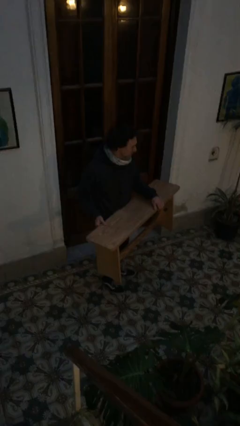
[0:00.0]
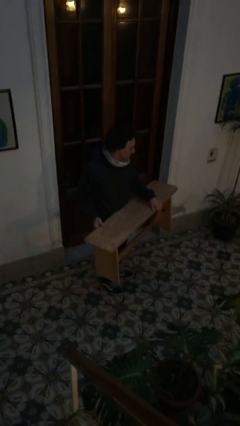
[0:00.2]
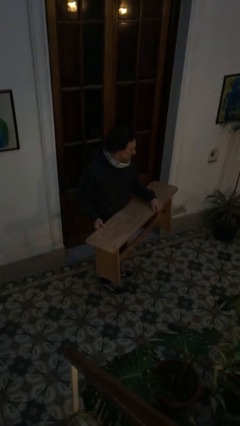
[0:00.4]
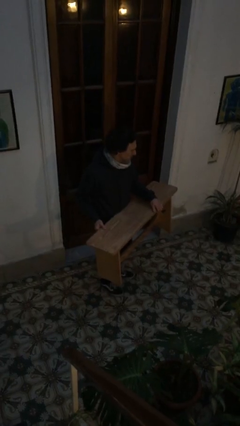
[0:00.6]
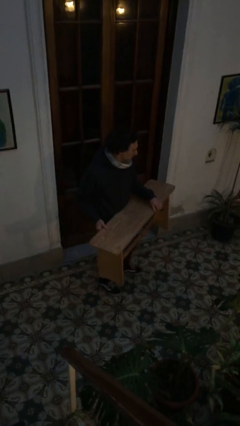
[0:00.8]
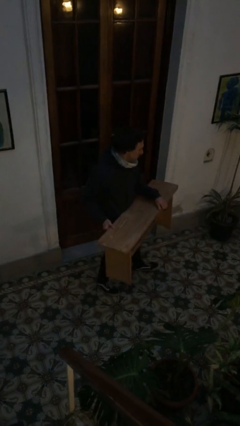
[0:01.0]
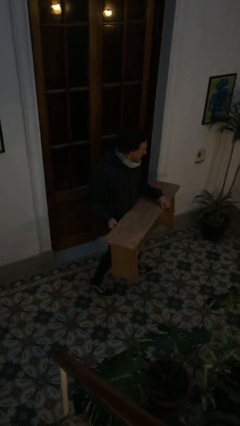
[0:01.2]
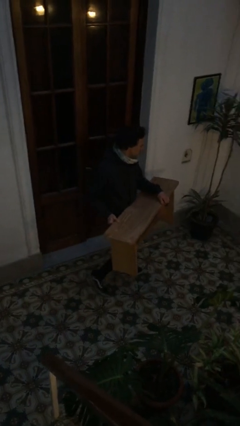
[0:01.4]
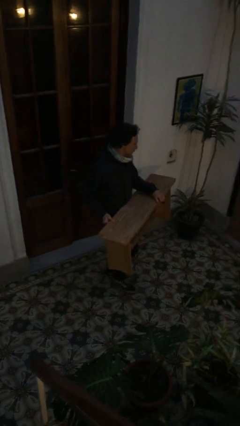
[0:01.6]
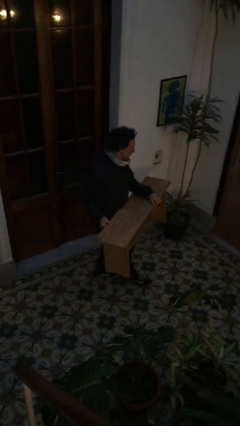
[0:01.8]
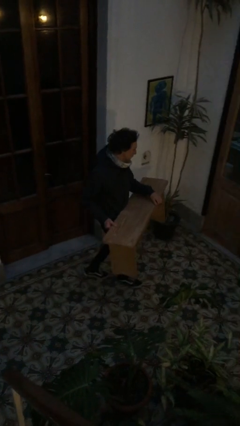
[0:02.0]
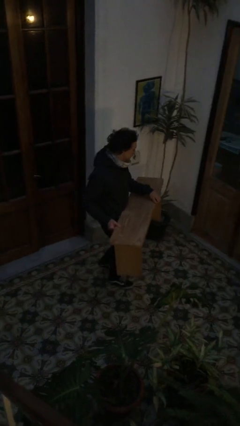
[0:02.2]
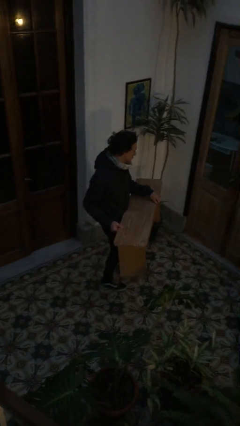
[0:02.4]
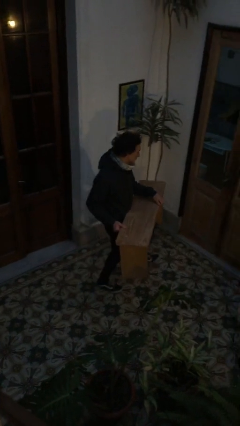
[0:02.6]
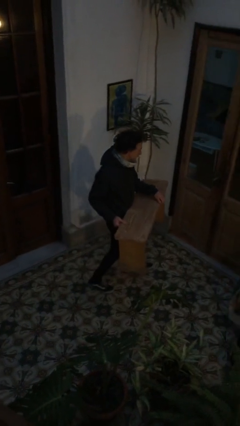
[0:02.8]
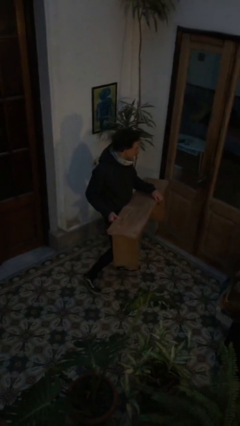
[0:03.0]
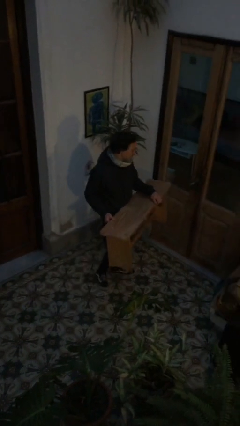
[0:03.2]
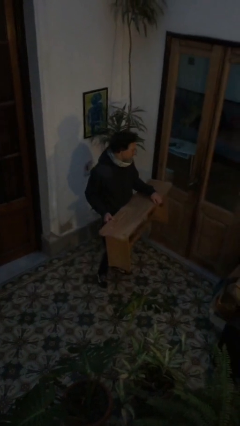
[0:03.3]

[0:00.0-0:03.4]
person carries furniture

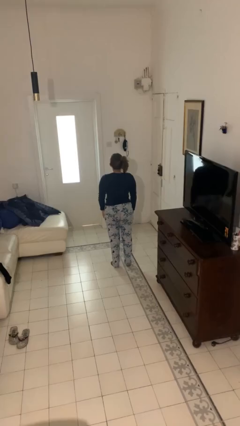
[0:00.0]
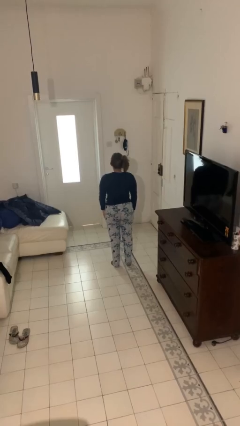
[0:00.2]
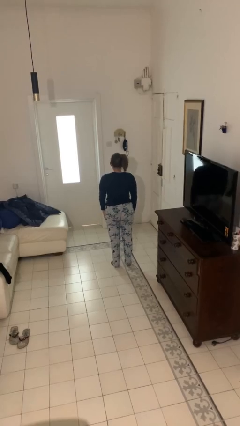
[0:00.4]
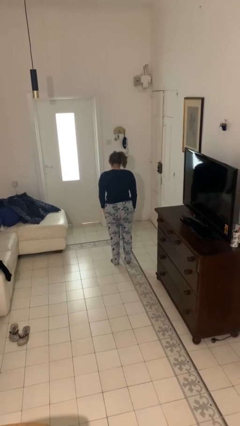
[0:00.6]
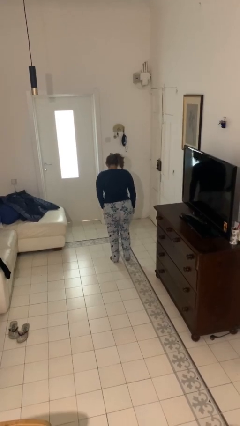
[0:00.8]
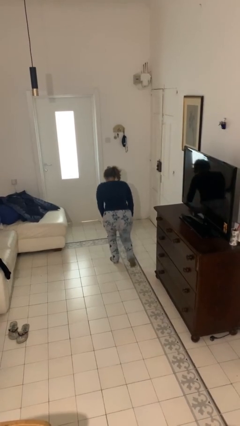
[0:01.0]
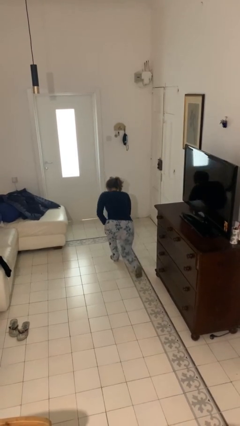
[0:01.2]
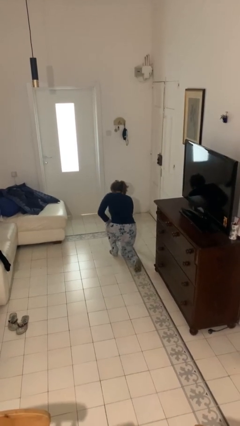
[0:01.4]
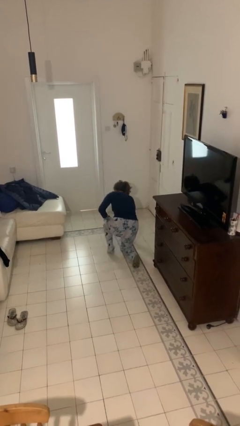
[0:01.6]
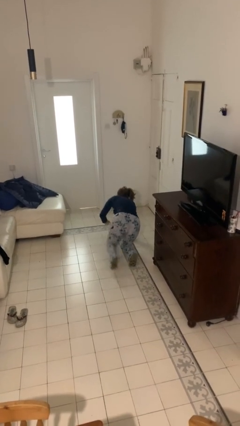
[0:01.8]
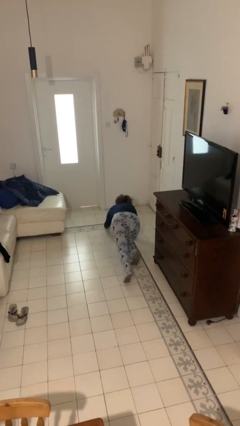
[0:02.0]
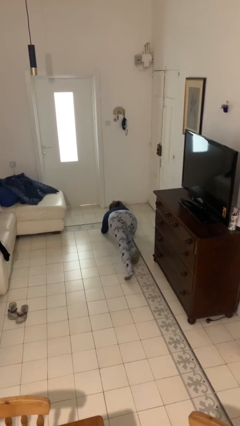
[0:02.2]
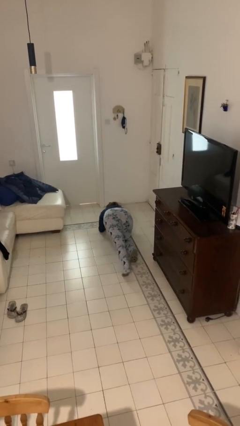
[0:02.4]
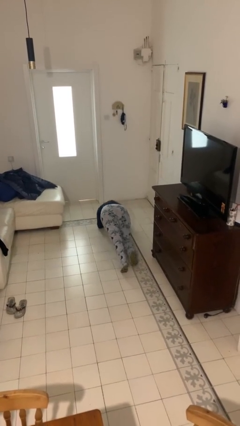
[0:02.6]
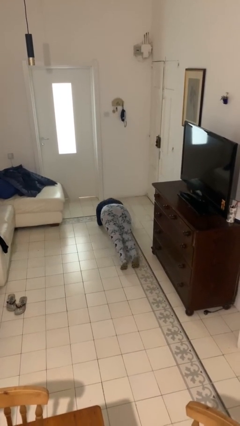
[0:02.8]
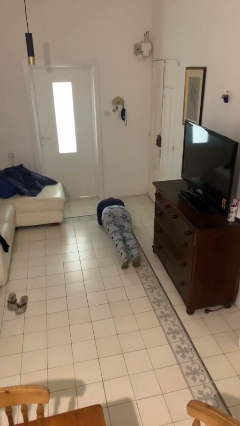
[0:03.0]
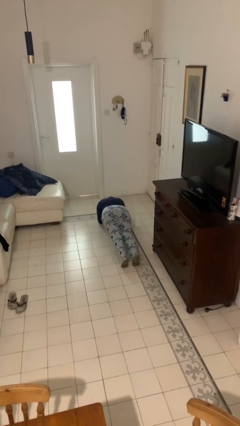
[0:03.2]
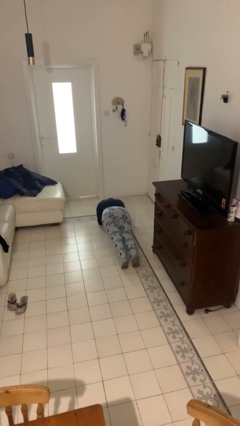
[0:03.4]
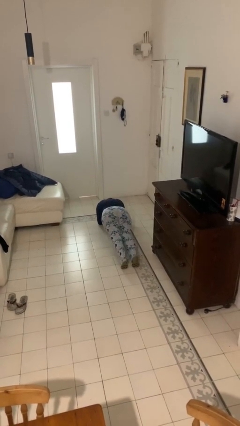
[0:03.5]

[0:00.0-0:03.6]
person exercises with plank

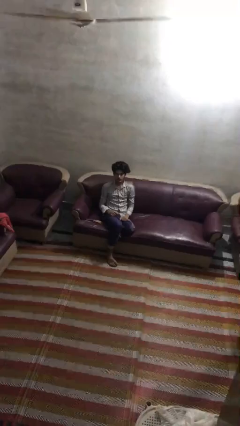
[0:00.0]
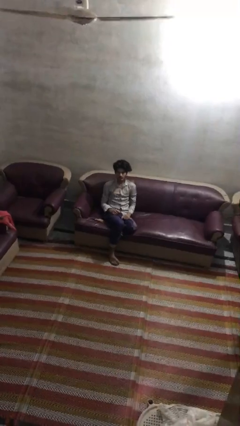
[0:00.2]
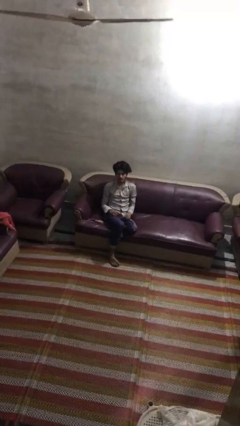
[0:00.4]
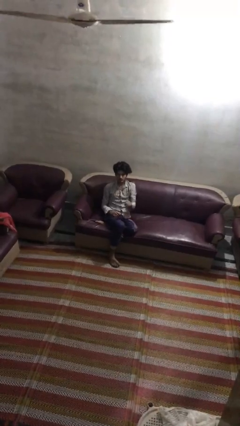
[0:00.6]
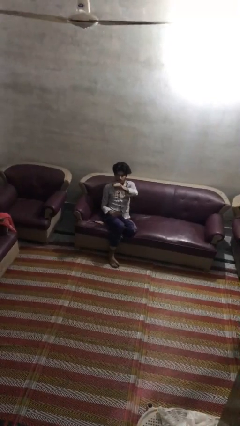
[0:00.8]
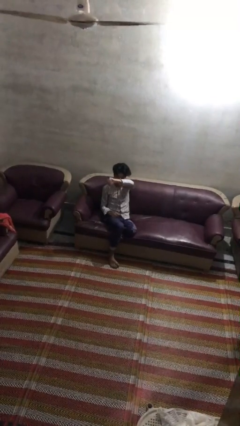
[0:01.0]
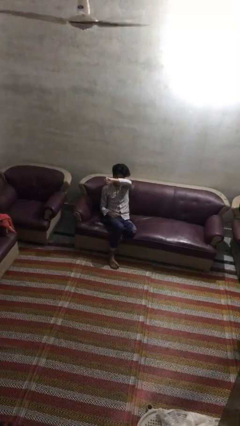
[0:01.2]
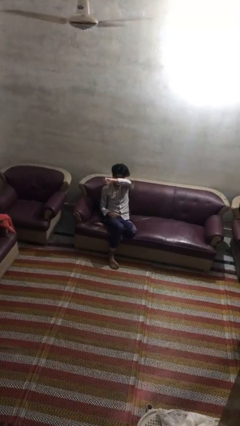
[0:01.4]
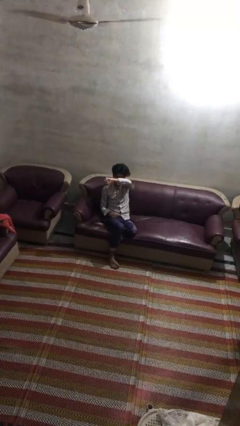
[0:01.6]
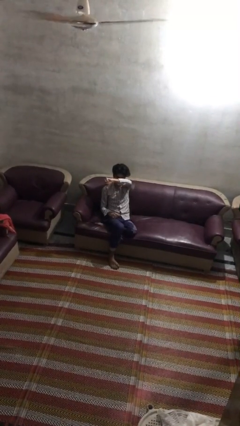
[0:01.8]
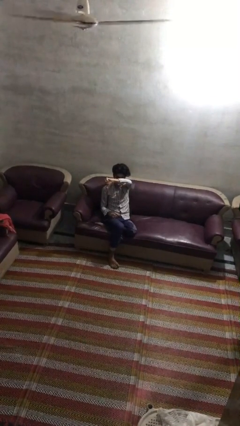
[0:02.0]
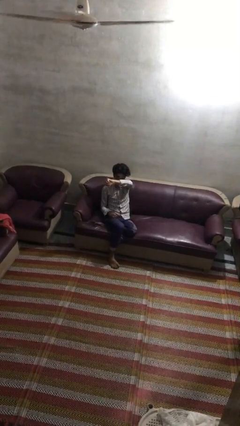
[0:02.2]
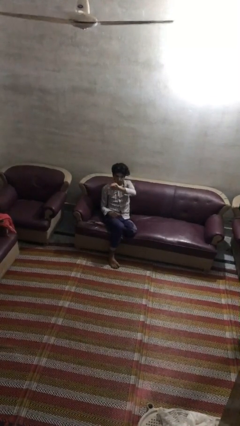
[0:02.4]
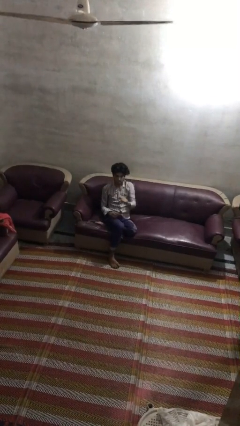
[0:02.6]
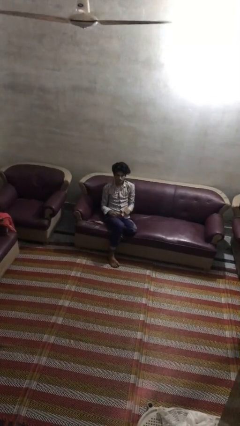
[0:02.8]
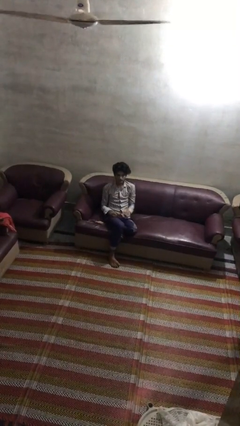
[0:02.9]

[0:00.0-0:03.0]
person gestures thumbs down

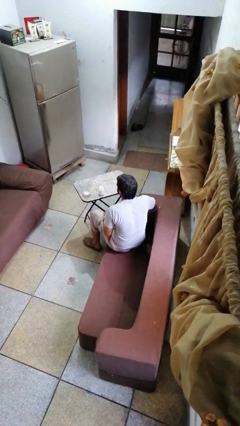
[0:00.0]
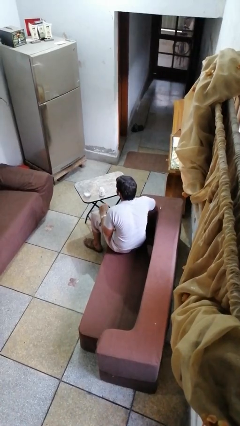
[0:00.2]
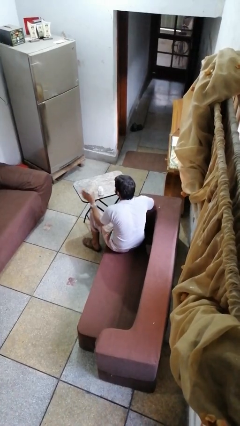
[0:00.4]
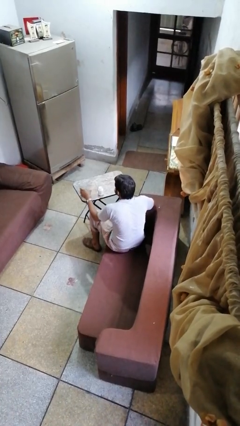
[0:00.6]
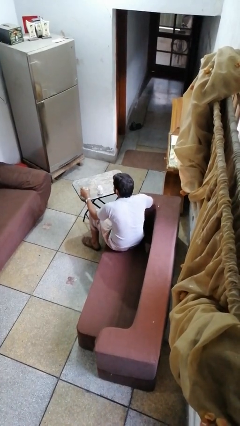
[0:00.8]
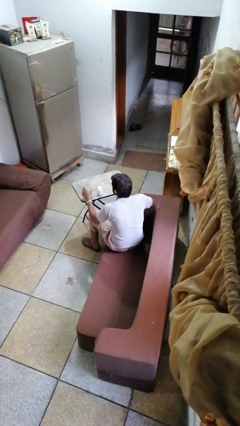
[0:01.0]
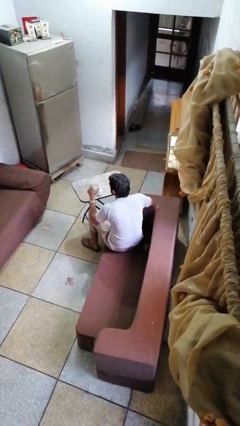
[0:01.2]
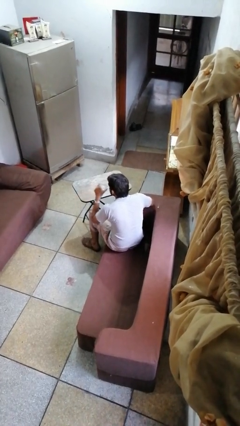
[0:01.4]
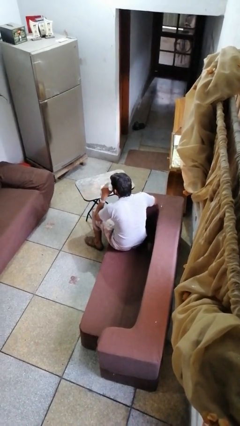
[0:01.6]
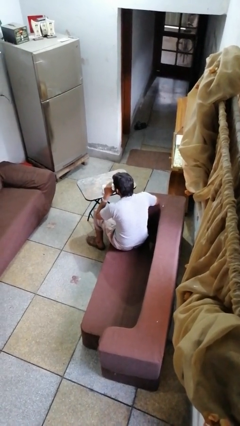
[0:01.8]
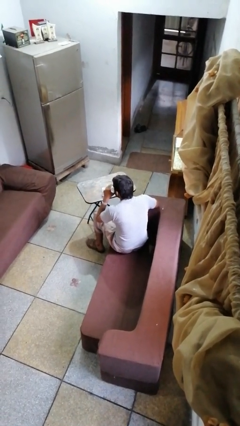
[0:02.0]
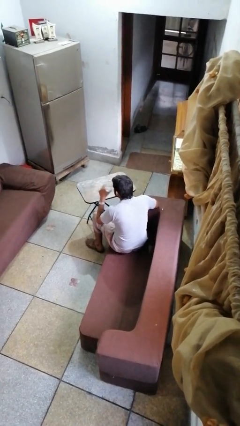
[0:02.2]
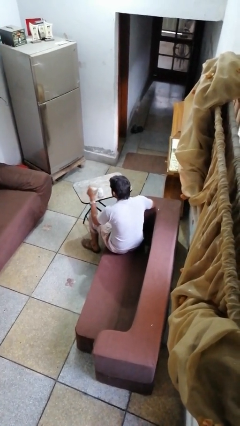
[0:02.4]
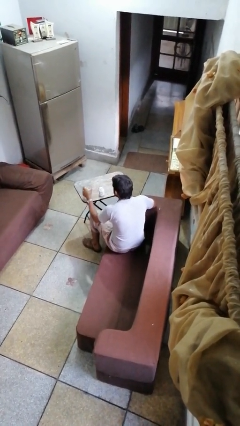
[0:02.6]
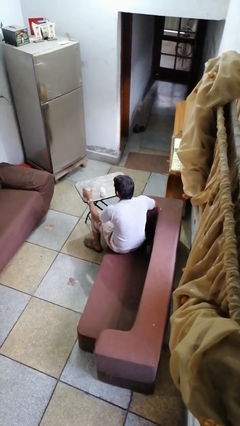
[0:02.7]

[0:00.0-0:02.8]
person drinks from cup

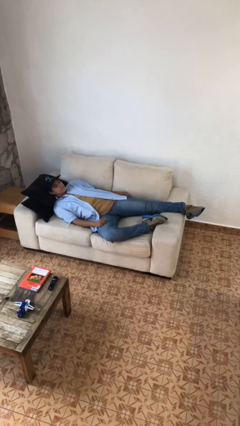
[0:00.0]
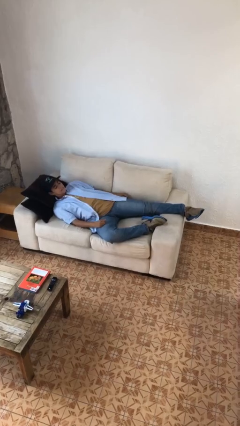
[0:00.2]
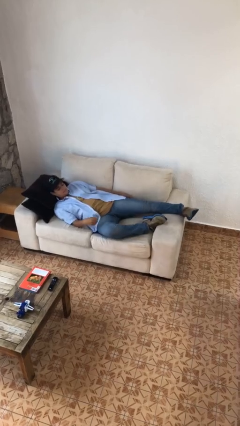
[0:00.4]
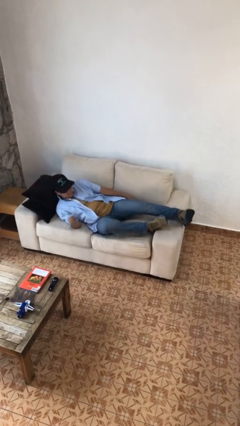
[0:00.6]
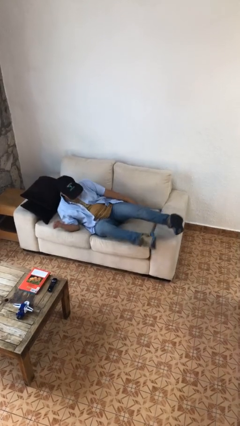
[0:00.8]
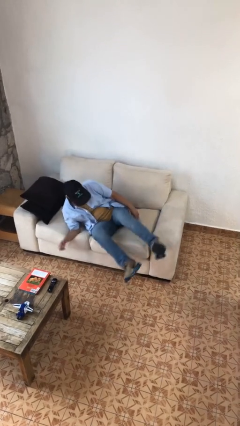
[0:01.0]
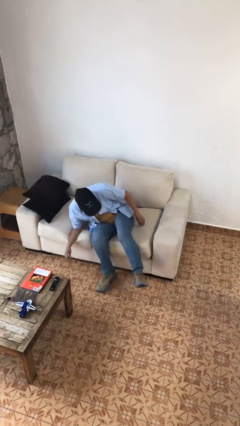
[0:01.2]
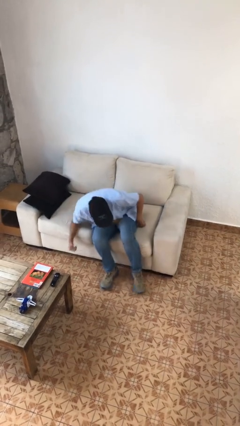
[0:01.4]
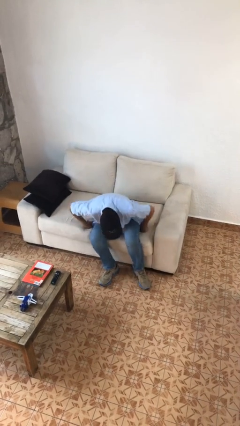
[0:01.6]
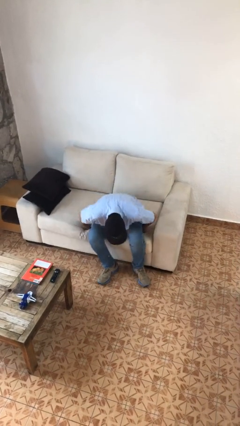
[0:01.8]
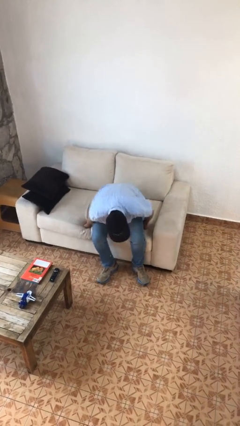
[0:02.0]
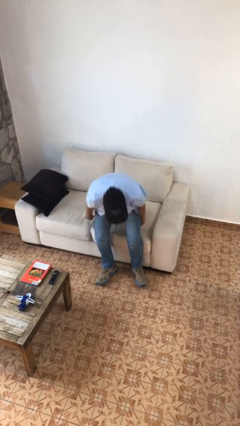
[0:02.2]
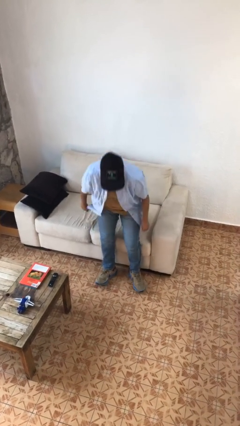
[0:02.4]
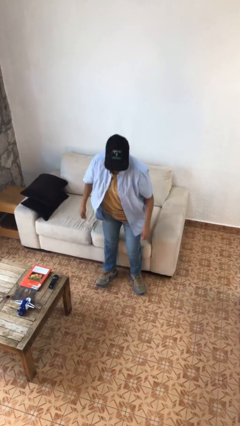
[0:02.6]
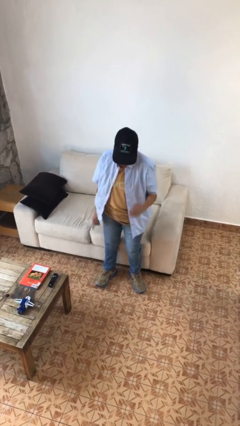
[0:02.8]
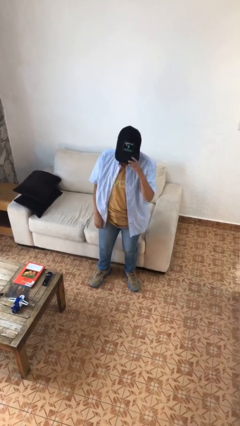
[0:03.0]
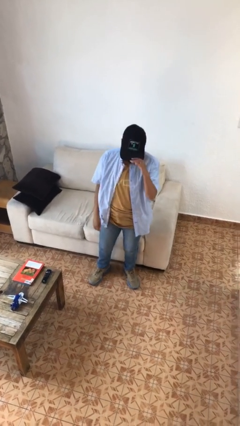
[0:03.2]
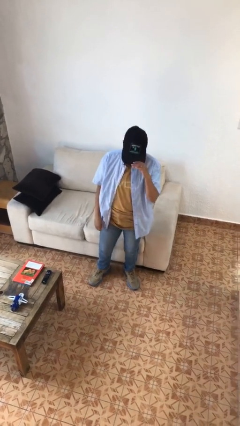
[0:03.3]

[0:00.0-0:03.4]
person stands up

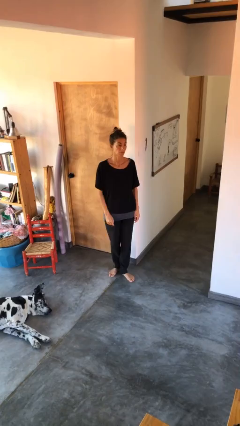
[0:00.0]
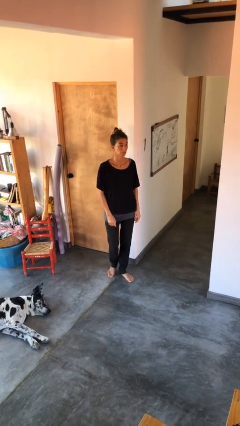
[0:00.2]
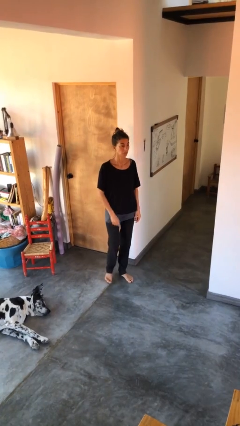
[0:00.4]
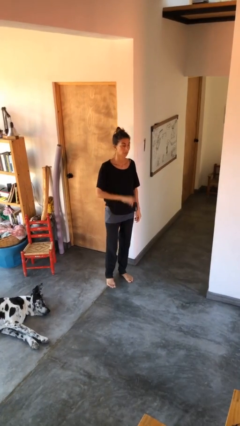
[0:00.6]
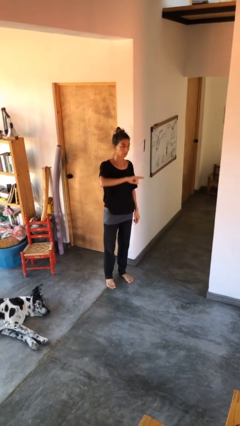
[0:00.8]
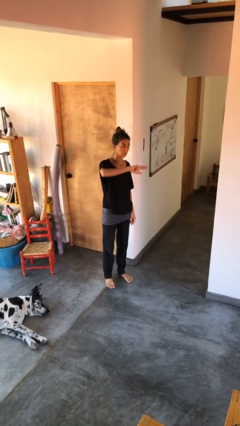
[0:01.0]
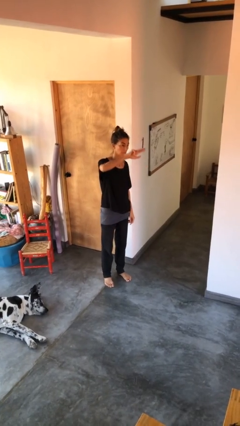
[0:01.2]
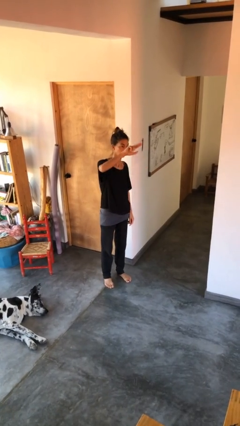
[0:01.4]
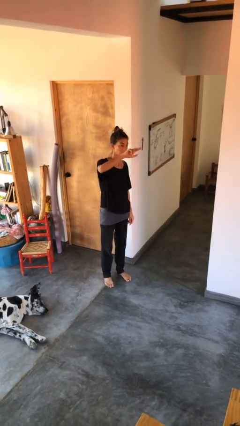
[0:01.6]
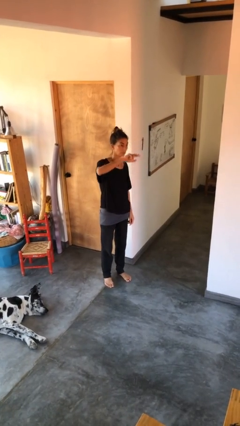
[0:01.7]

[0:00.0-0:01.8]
person gestures swipe up
